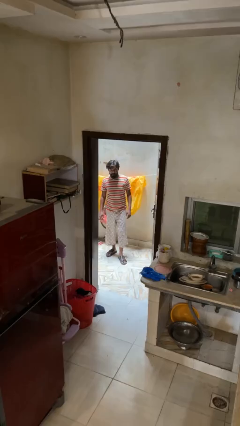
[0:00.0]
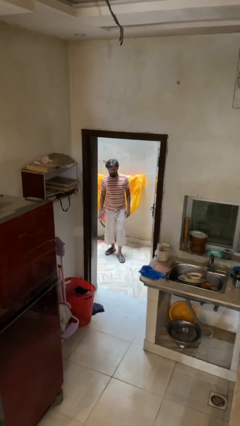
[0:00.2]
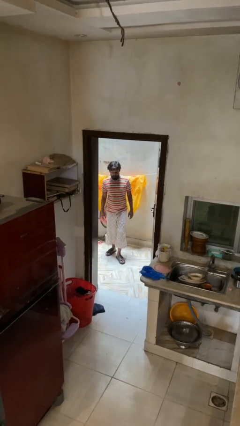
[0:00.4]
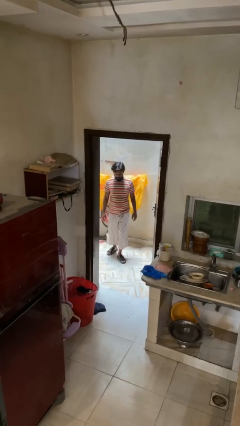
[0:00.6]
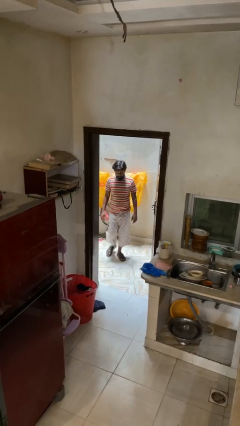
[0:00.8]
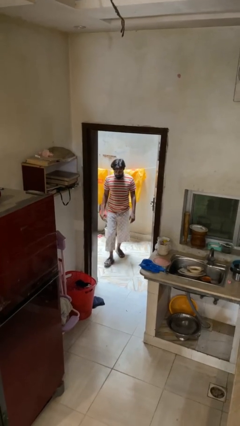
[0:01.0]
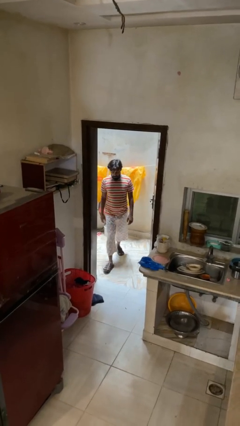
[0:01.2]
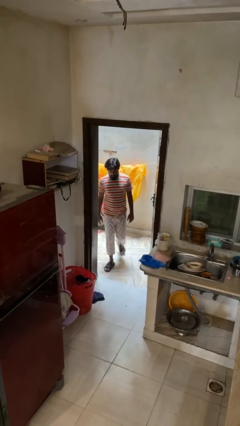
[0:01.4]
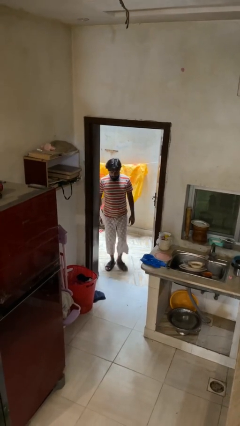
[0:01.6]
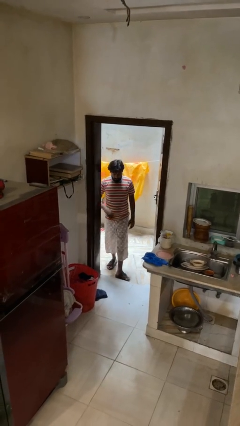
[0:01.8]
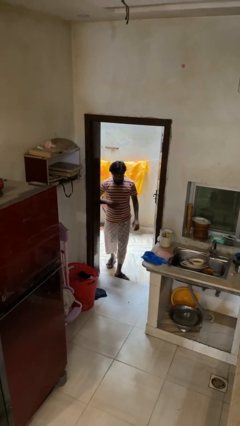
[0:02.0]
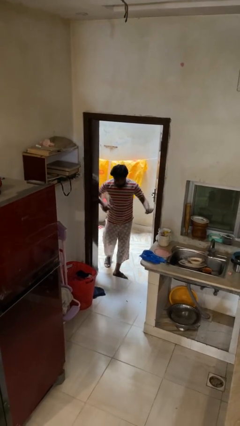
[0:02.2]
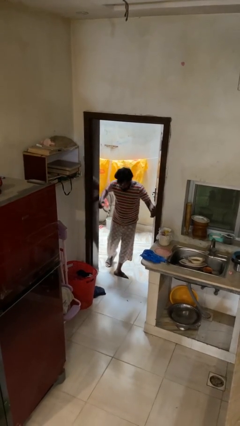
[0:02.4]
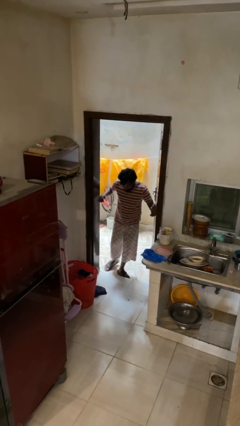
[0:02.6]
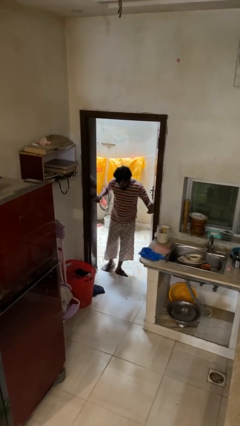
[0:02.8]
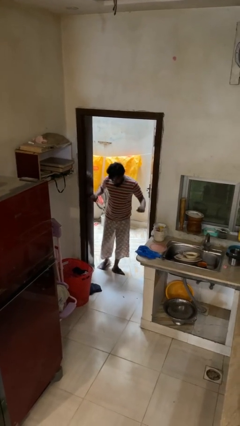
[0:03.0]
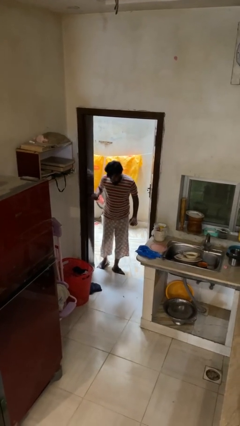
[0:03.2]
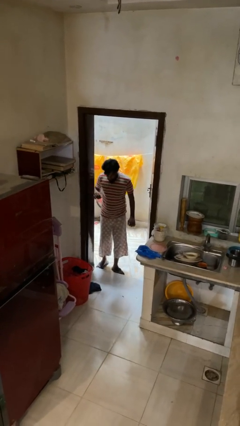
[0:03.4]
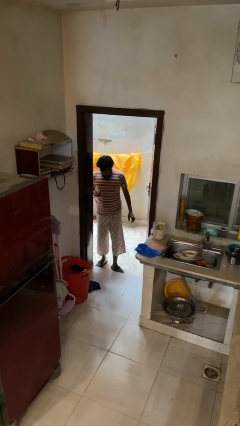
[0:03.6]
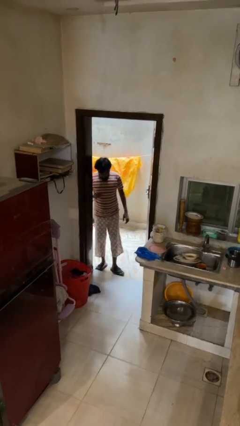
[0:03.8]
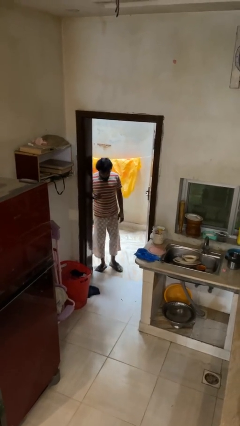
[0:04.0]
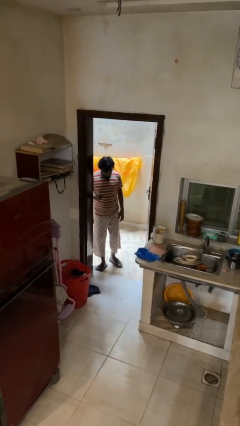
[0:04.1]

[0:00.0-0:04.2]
person bumps into wall

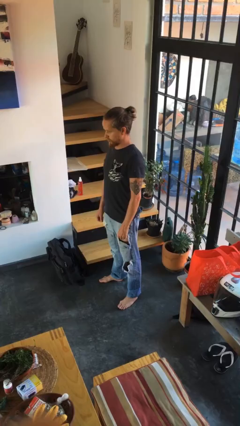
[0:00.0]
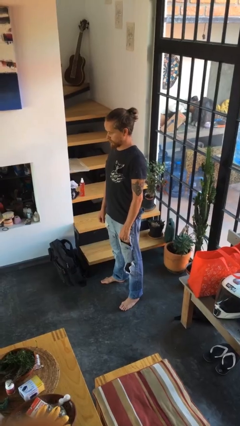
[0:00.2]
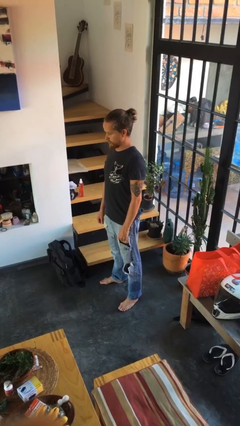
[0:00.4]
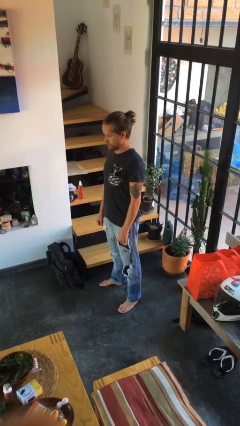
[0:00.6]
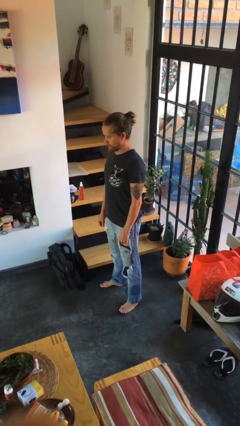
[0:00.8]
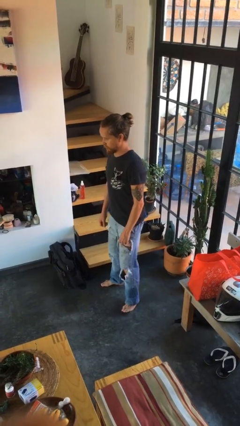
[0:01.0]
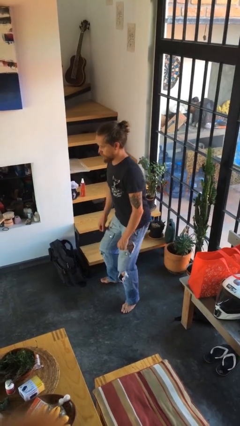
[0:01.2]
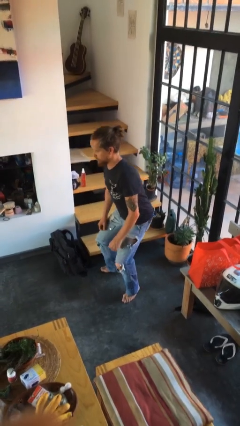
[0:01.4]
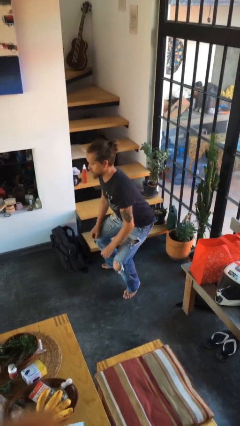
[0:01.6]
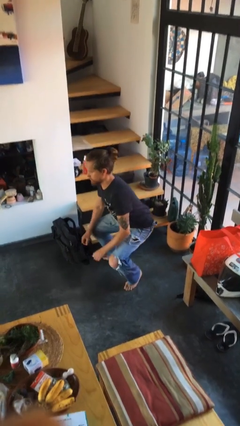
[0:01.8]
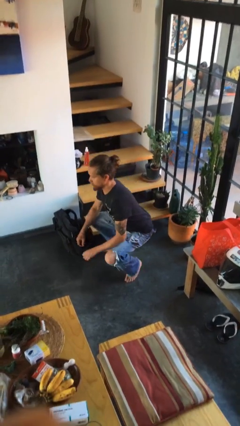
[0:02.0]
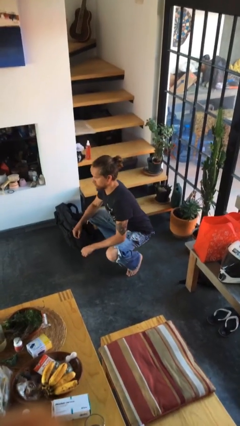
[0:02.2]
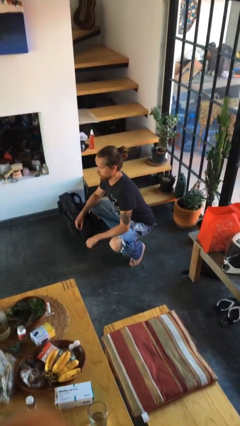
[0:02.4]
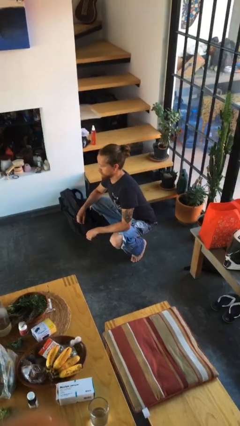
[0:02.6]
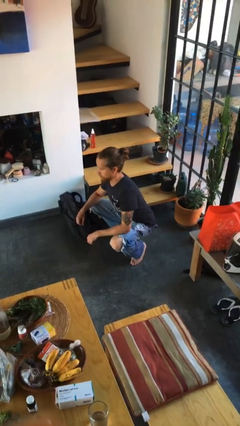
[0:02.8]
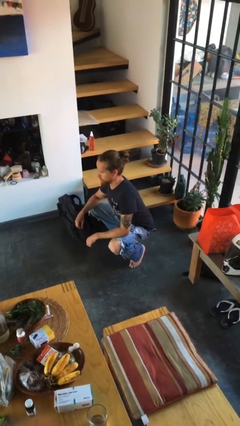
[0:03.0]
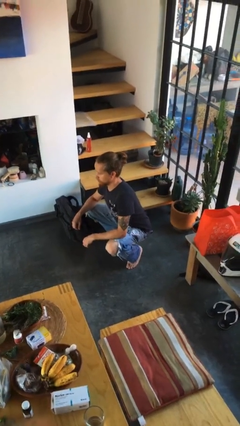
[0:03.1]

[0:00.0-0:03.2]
person squats

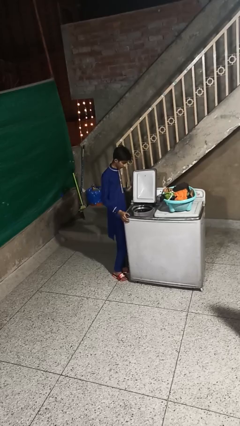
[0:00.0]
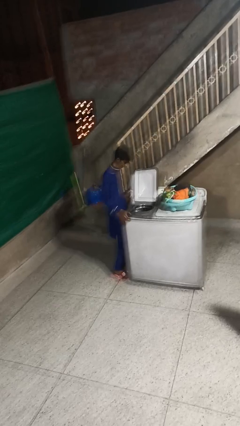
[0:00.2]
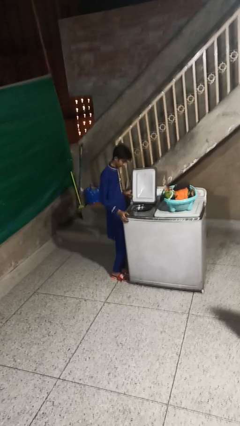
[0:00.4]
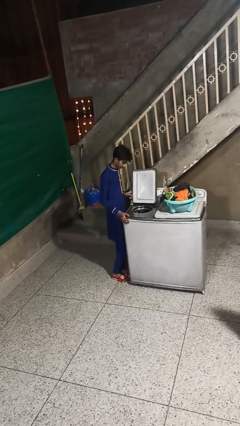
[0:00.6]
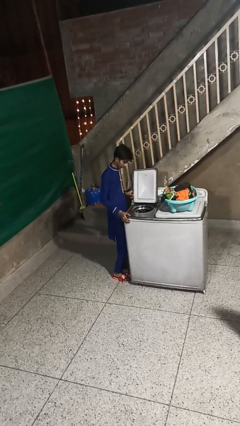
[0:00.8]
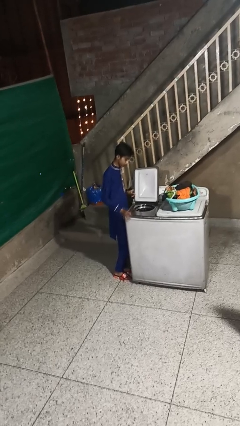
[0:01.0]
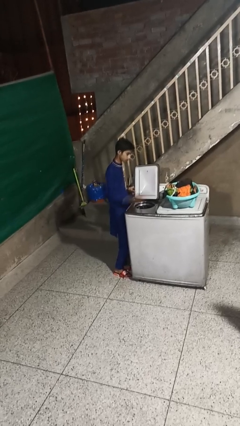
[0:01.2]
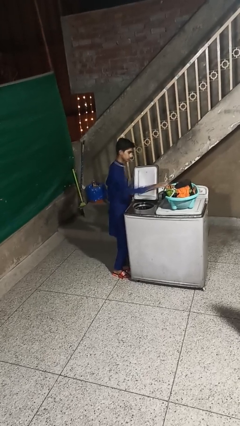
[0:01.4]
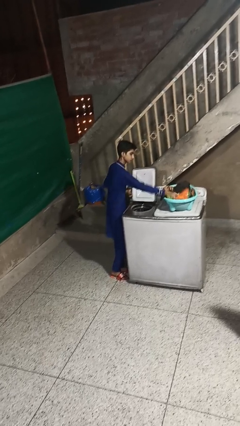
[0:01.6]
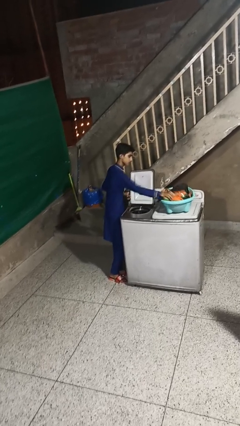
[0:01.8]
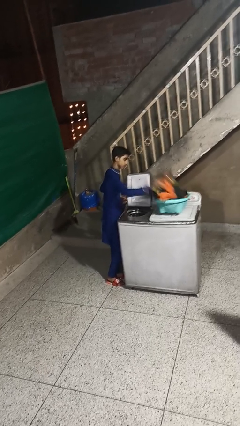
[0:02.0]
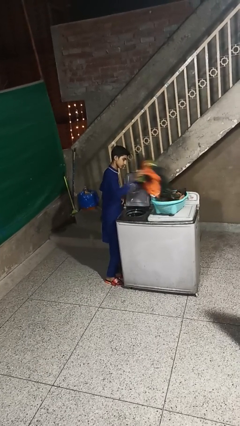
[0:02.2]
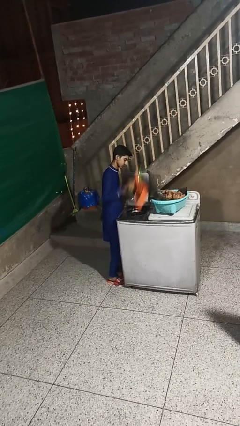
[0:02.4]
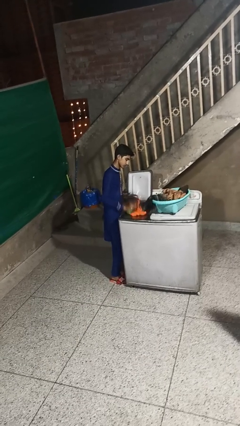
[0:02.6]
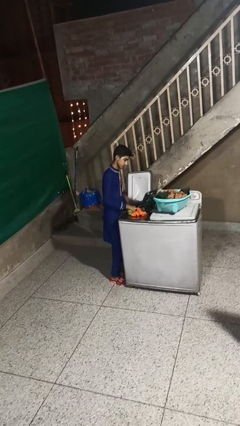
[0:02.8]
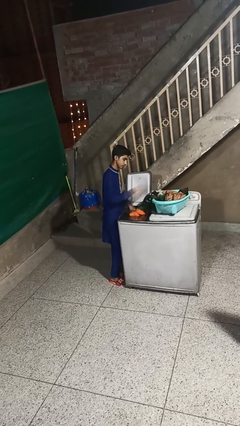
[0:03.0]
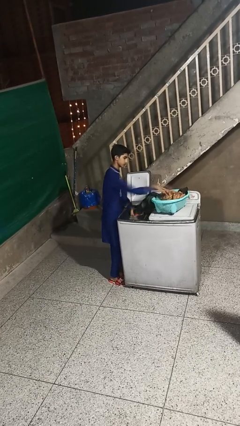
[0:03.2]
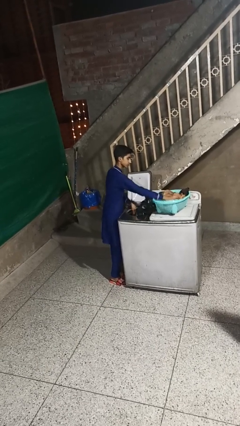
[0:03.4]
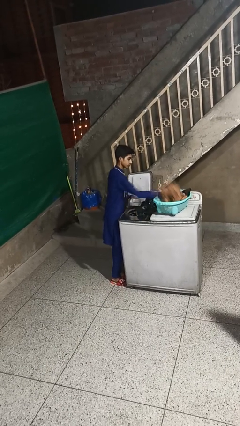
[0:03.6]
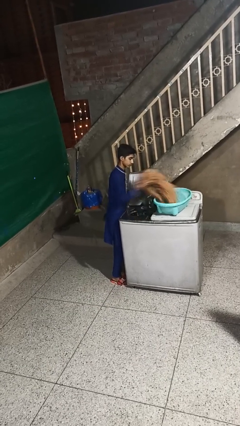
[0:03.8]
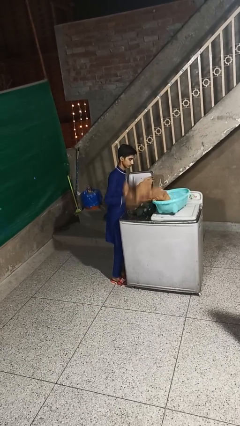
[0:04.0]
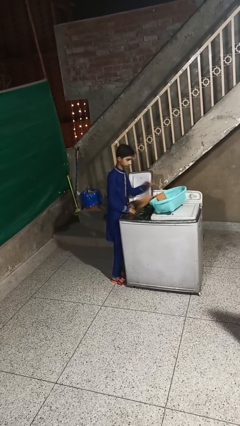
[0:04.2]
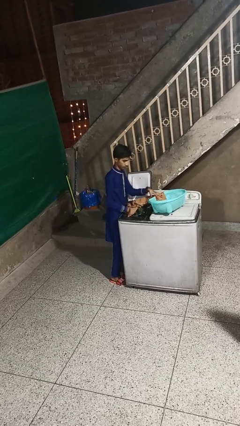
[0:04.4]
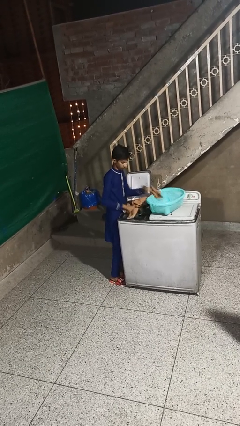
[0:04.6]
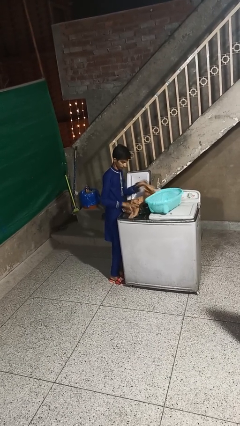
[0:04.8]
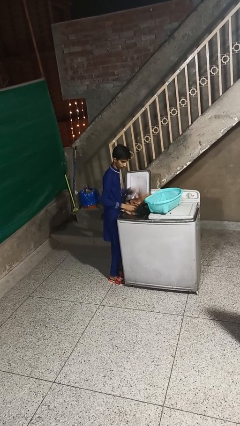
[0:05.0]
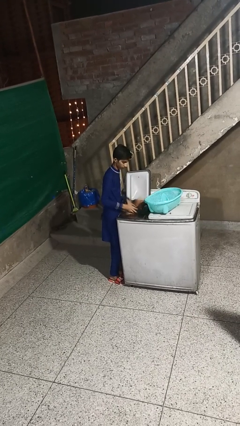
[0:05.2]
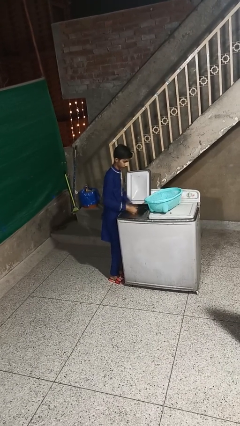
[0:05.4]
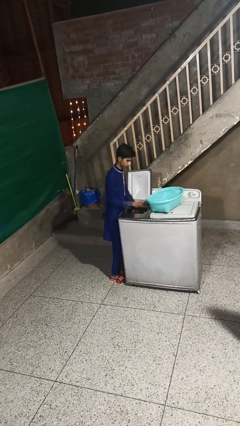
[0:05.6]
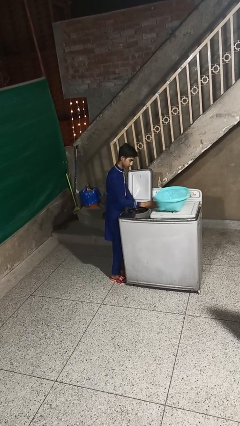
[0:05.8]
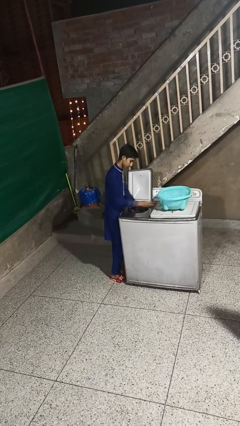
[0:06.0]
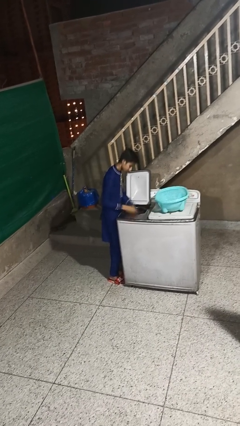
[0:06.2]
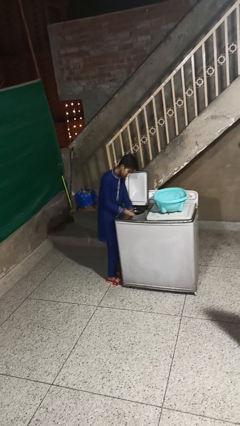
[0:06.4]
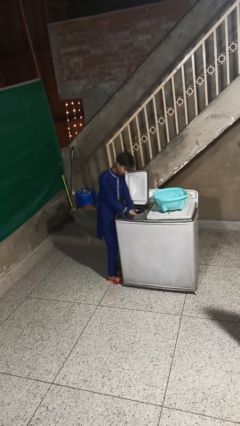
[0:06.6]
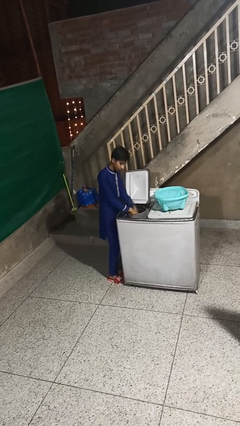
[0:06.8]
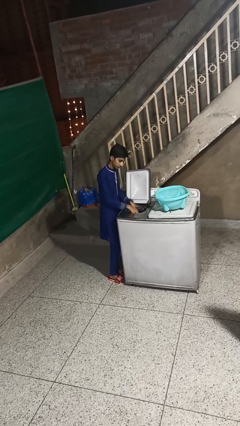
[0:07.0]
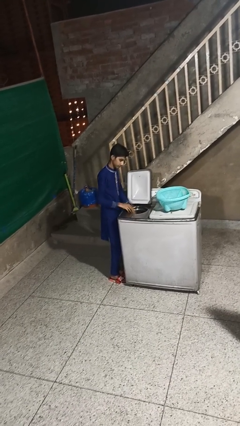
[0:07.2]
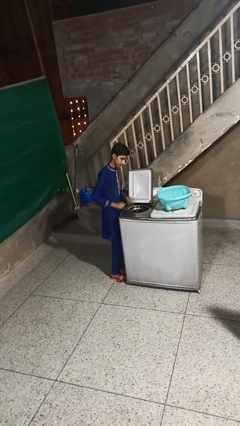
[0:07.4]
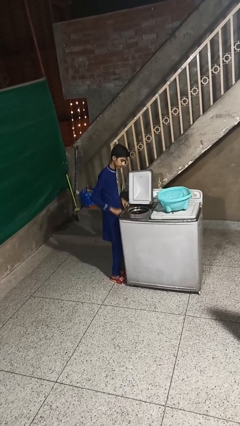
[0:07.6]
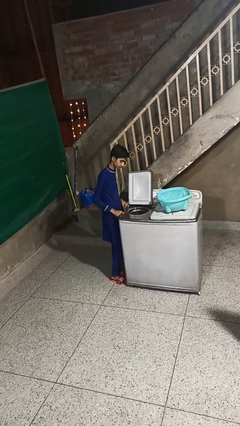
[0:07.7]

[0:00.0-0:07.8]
person loads dryer

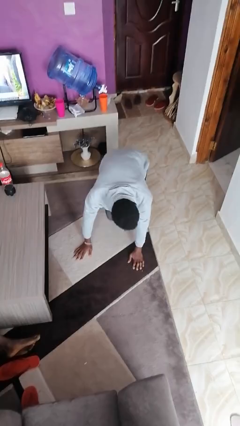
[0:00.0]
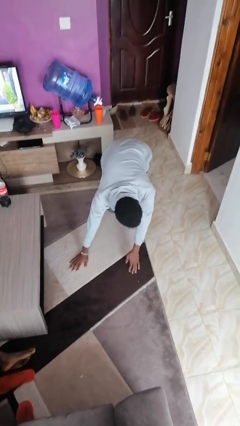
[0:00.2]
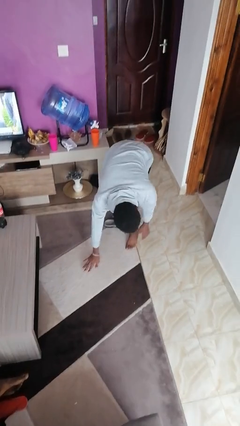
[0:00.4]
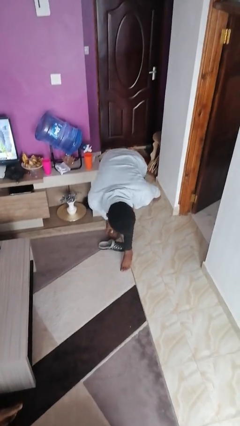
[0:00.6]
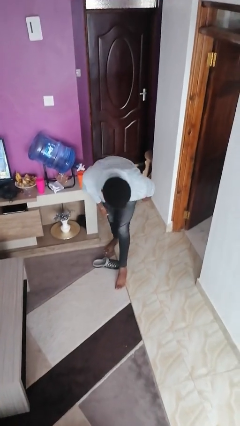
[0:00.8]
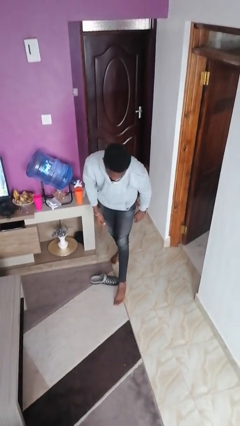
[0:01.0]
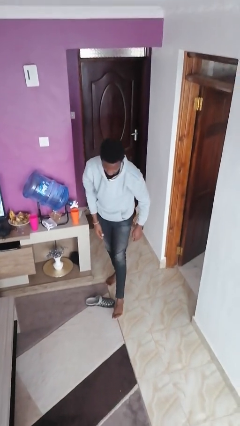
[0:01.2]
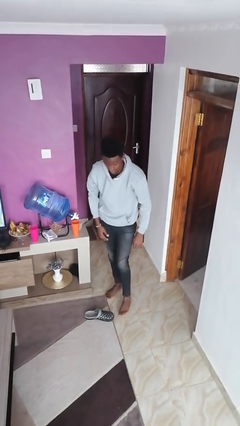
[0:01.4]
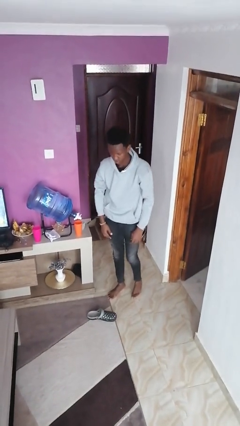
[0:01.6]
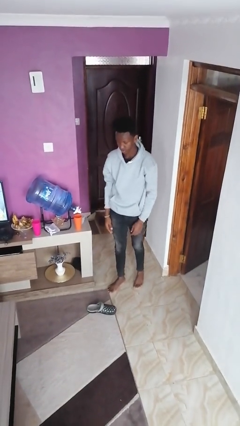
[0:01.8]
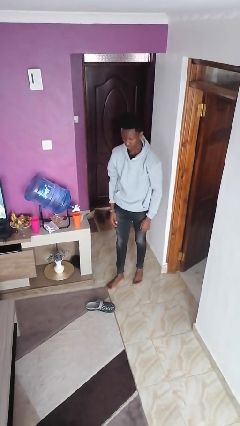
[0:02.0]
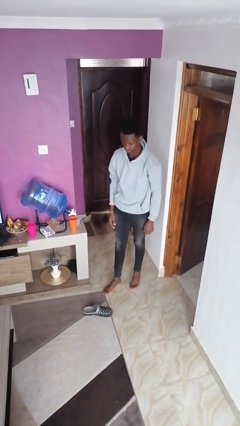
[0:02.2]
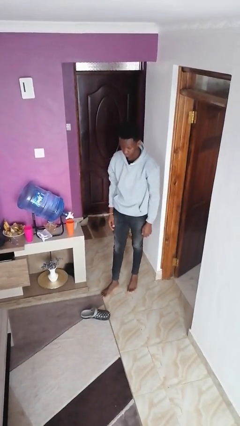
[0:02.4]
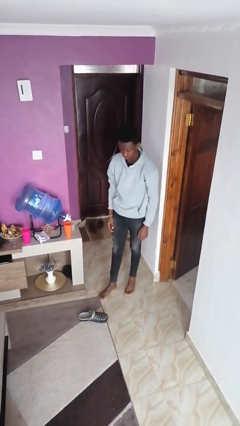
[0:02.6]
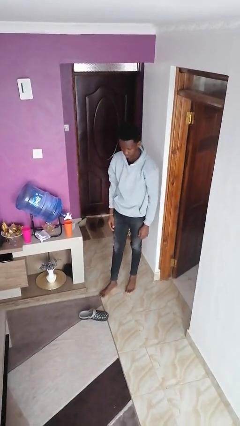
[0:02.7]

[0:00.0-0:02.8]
person stands up from floor
